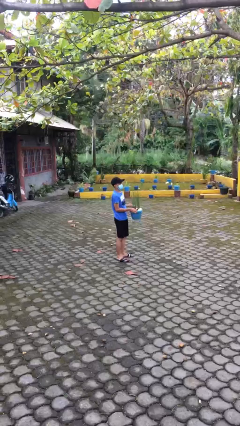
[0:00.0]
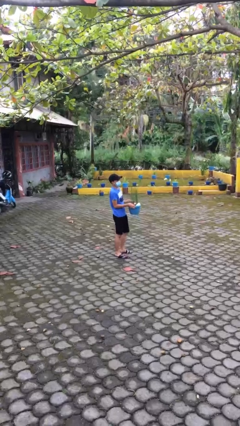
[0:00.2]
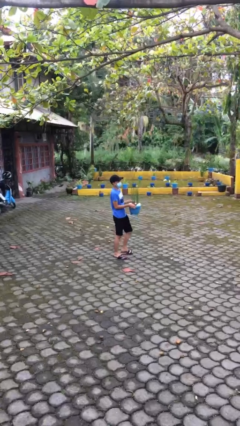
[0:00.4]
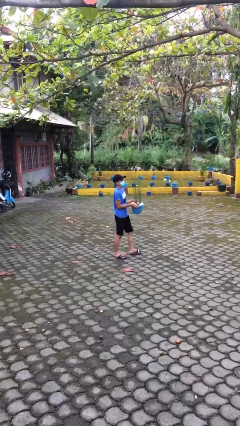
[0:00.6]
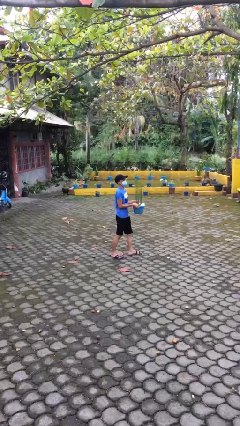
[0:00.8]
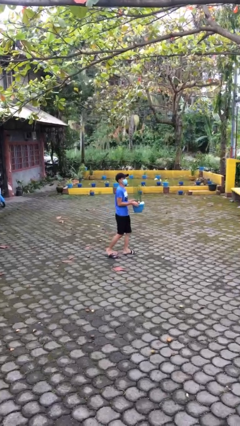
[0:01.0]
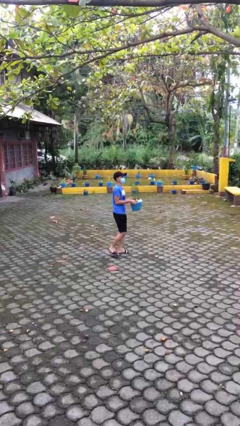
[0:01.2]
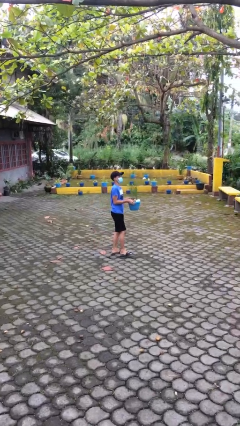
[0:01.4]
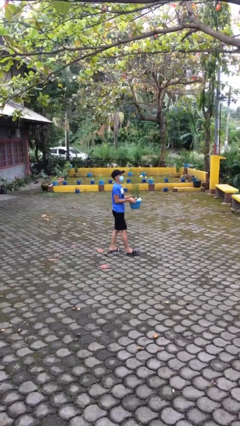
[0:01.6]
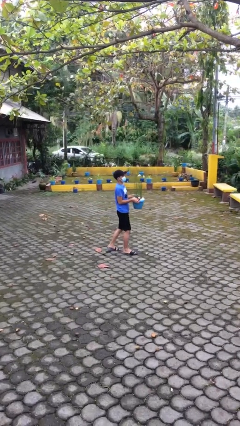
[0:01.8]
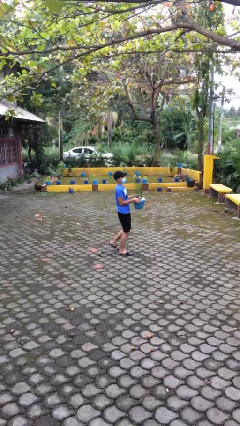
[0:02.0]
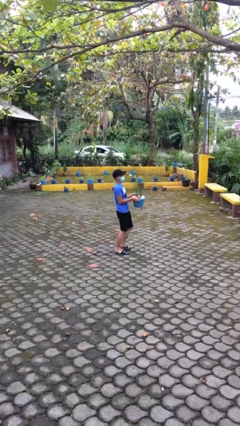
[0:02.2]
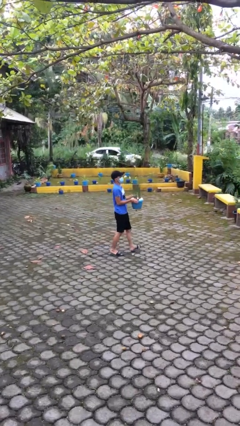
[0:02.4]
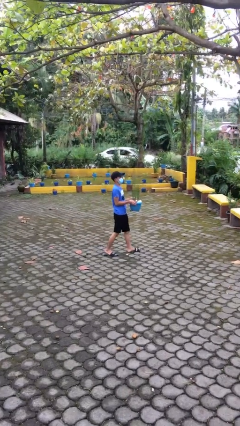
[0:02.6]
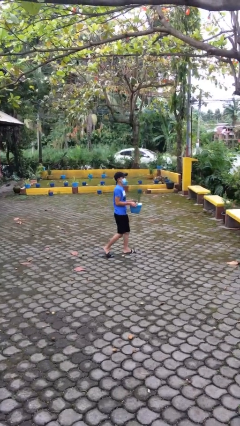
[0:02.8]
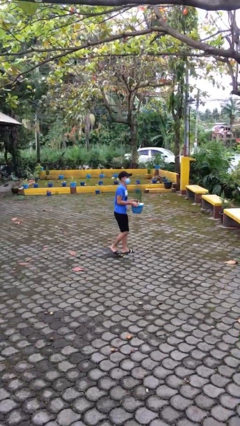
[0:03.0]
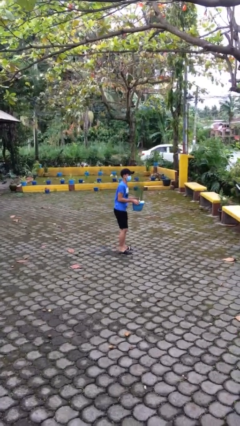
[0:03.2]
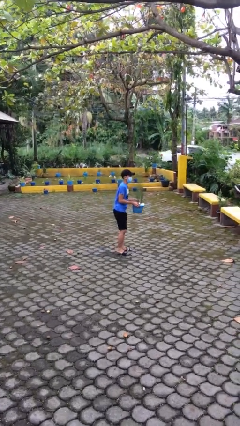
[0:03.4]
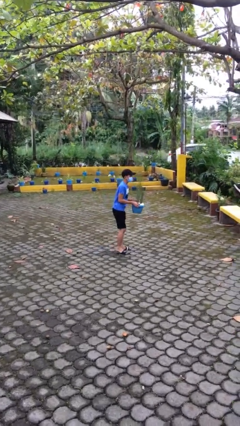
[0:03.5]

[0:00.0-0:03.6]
person carries heavy object

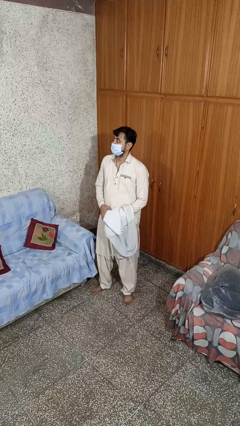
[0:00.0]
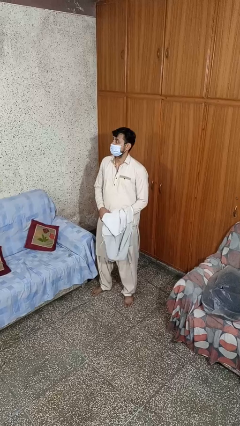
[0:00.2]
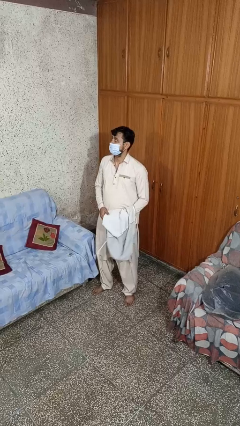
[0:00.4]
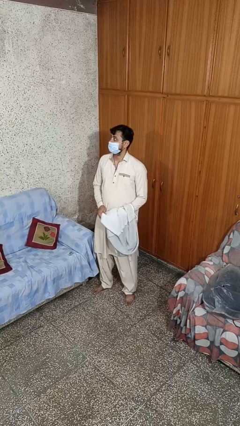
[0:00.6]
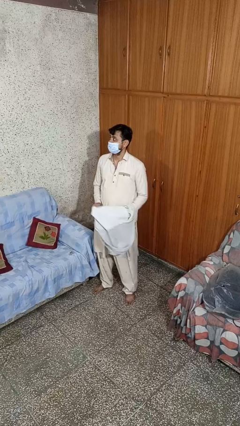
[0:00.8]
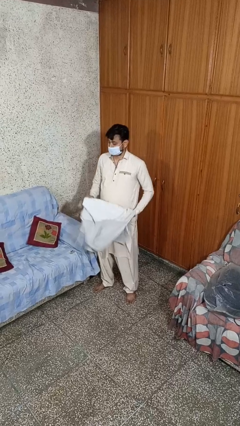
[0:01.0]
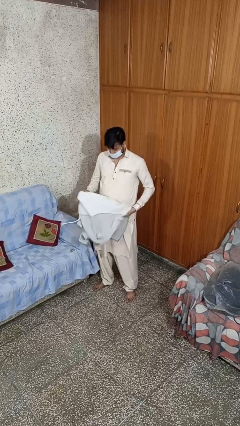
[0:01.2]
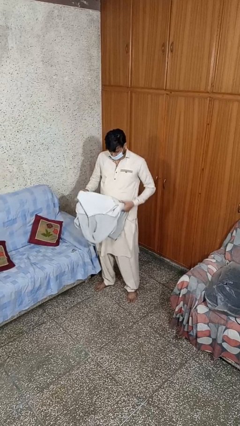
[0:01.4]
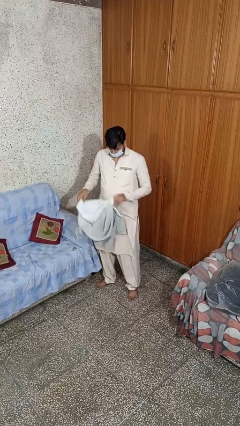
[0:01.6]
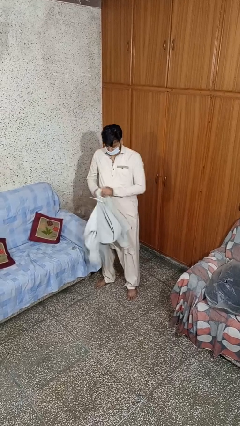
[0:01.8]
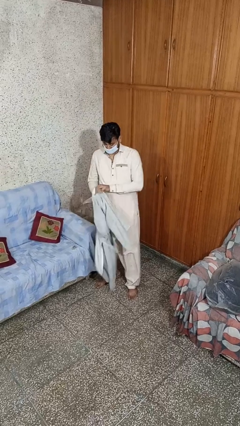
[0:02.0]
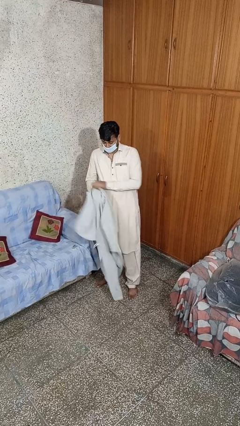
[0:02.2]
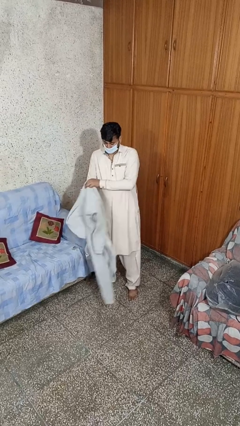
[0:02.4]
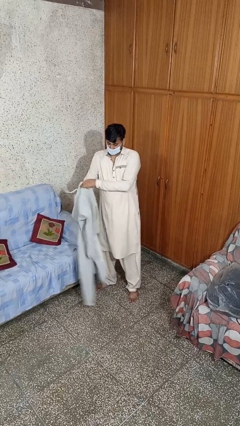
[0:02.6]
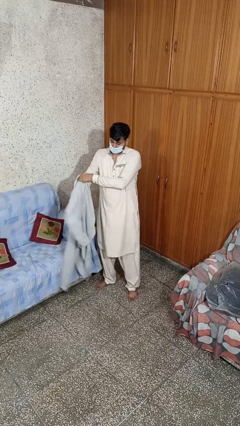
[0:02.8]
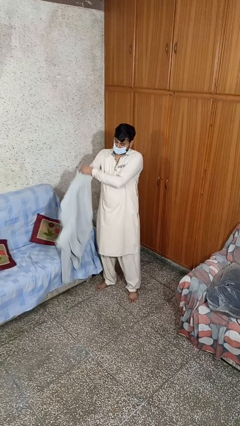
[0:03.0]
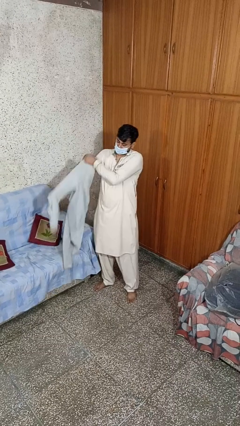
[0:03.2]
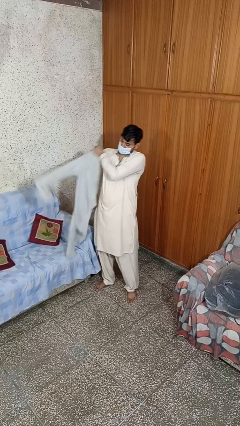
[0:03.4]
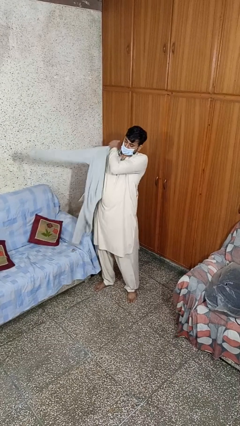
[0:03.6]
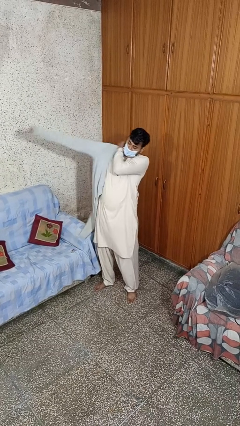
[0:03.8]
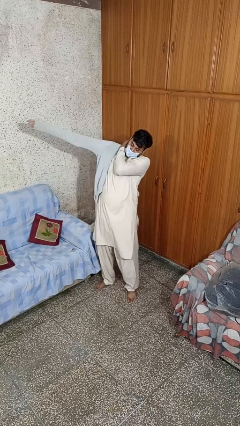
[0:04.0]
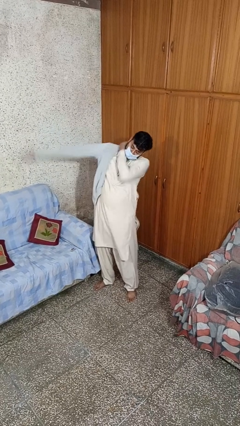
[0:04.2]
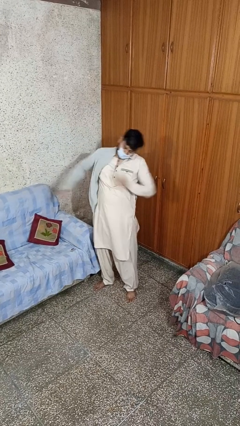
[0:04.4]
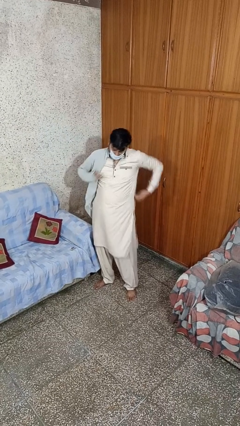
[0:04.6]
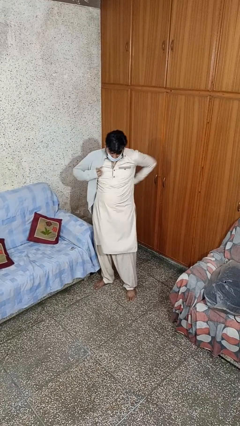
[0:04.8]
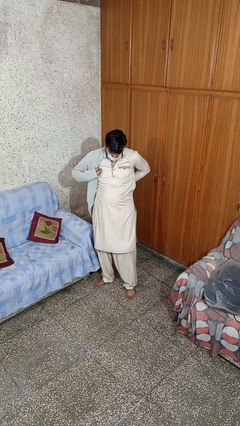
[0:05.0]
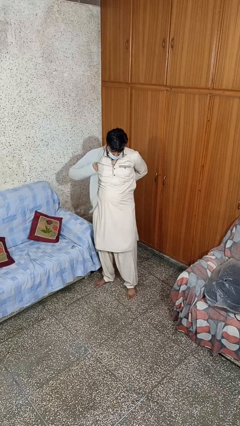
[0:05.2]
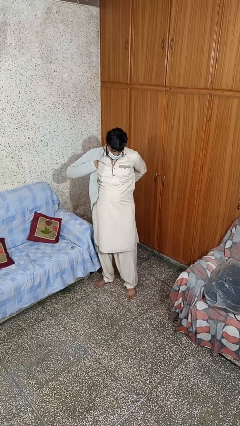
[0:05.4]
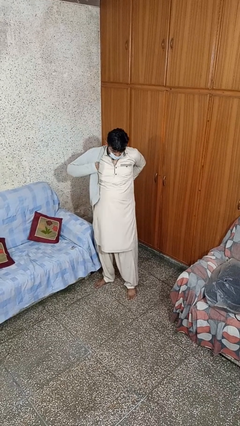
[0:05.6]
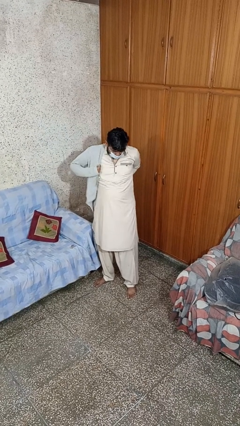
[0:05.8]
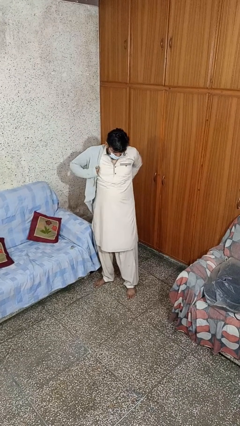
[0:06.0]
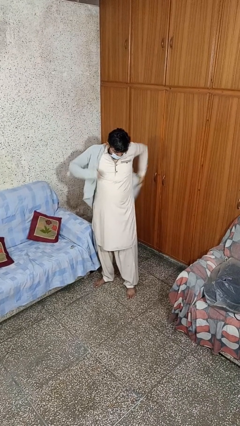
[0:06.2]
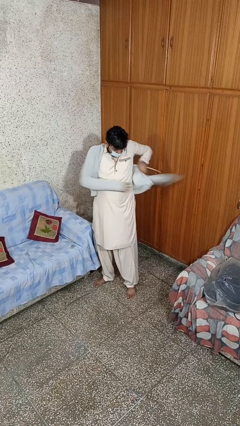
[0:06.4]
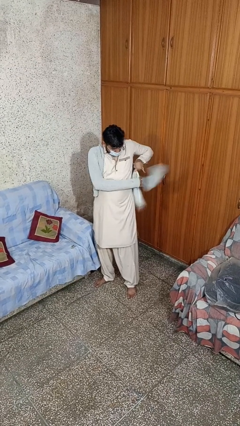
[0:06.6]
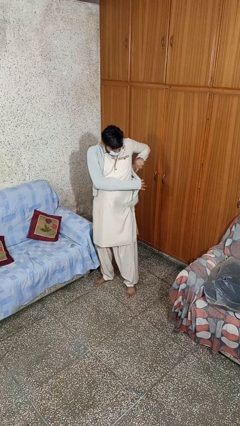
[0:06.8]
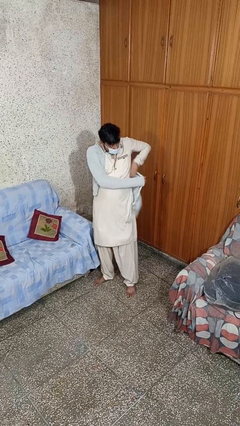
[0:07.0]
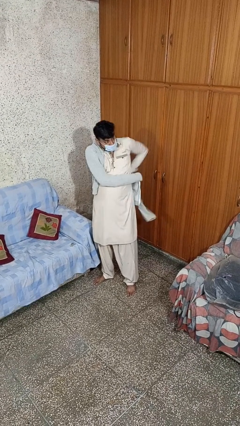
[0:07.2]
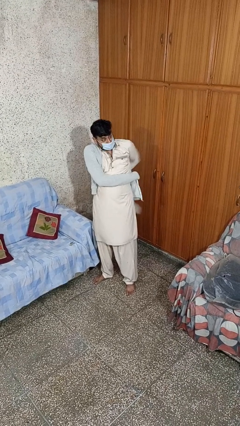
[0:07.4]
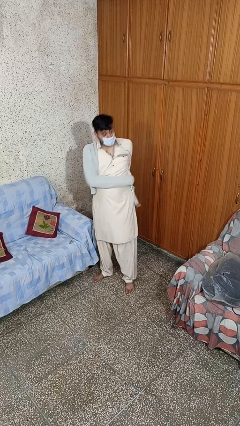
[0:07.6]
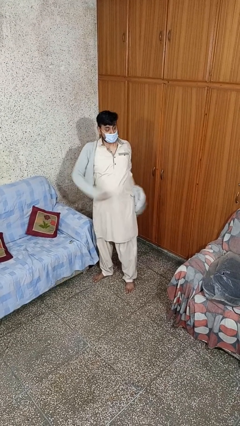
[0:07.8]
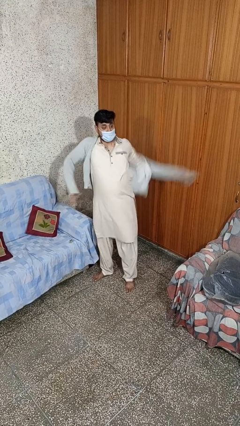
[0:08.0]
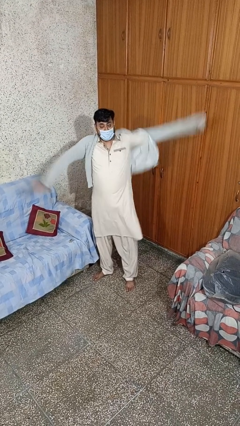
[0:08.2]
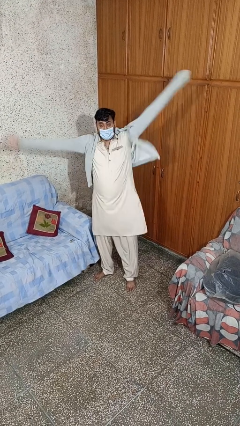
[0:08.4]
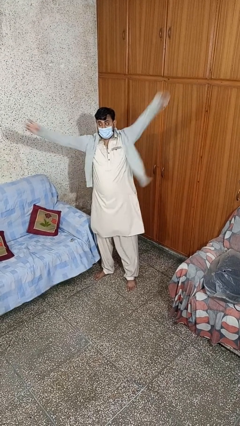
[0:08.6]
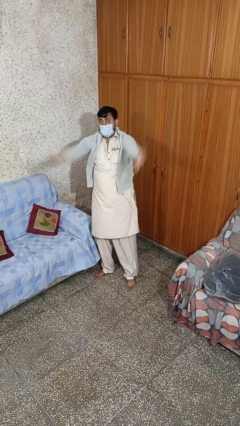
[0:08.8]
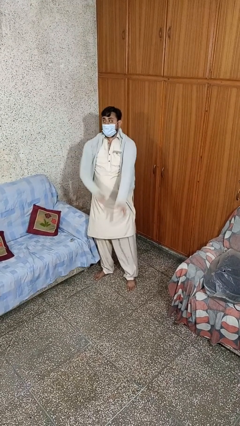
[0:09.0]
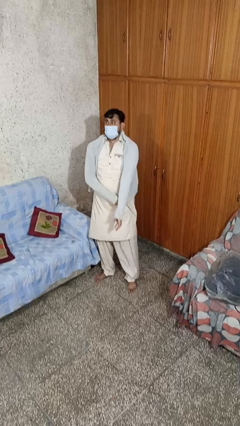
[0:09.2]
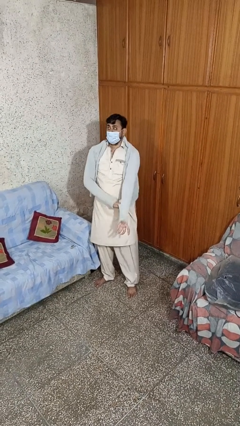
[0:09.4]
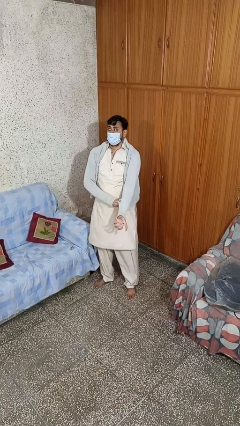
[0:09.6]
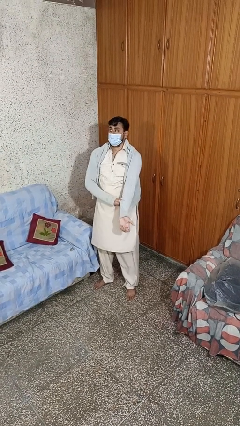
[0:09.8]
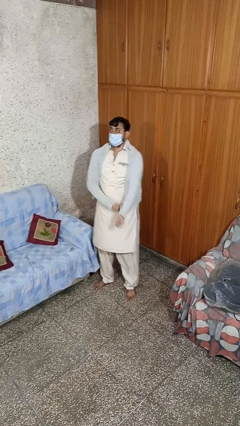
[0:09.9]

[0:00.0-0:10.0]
person puts on jacket

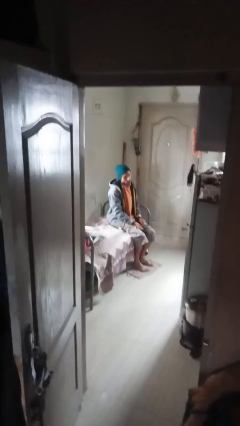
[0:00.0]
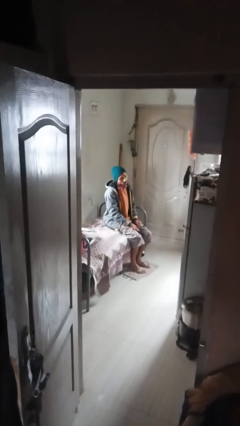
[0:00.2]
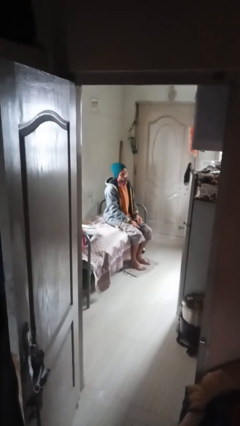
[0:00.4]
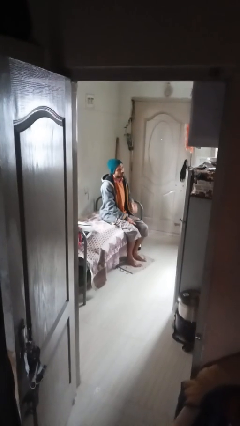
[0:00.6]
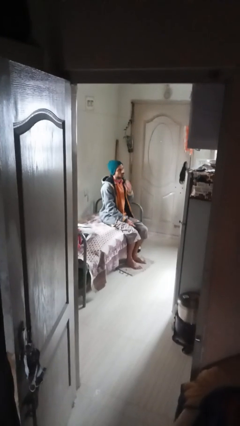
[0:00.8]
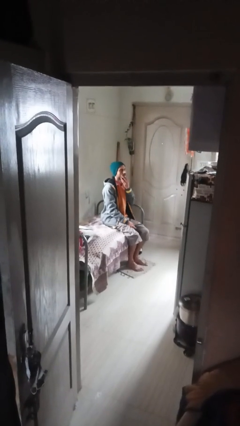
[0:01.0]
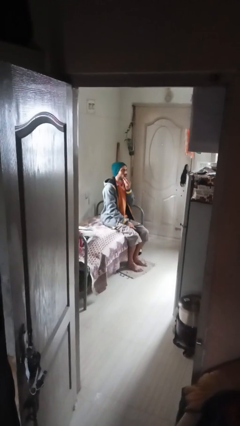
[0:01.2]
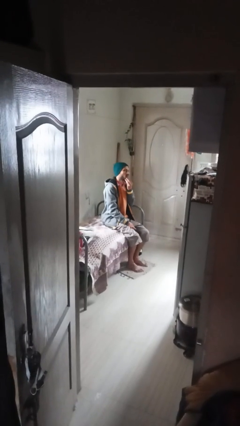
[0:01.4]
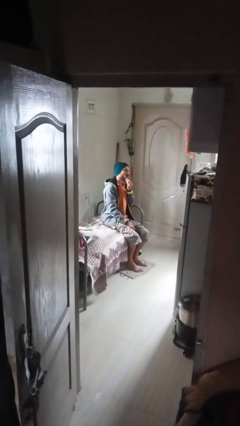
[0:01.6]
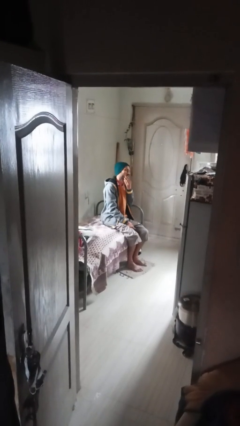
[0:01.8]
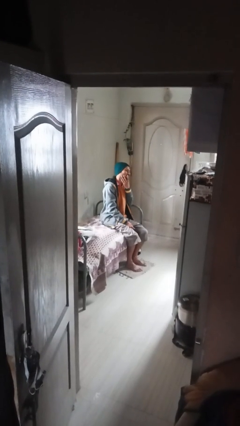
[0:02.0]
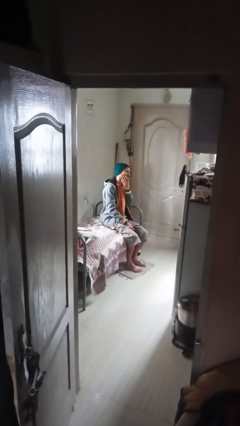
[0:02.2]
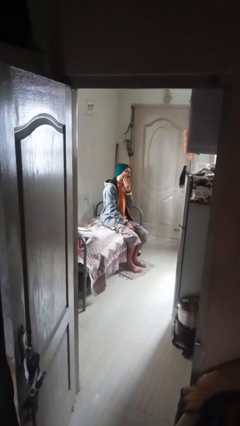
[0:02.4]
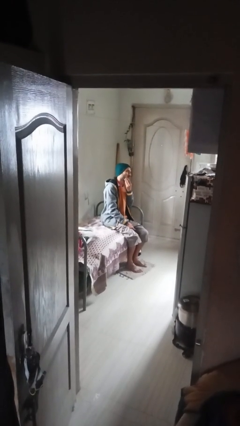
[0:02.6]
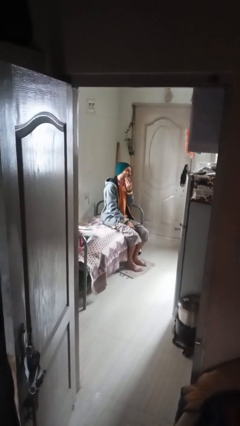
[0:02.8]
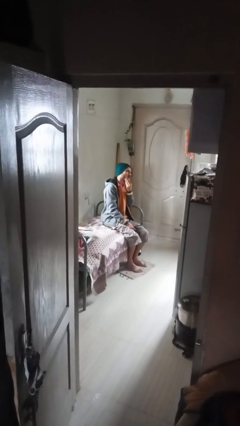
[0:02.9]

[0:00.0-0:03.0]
person strokes chin

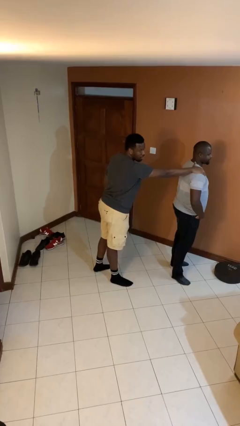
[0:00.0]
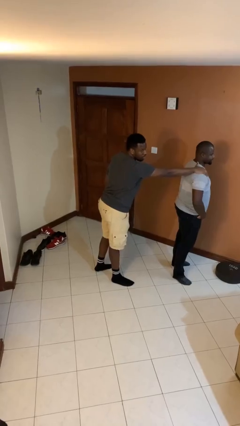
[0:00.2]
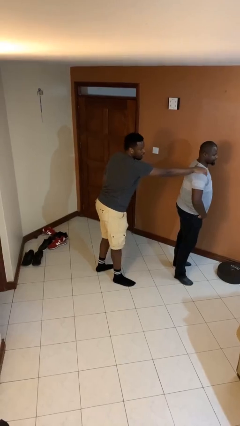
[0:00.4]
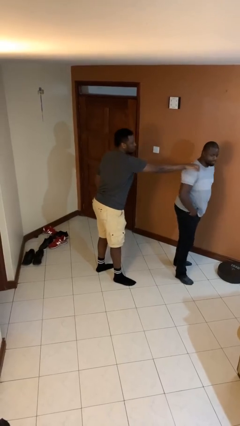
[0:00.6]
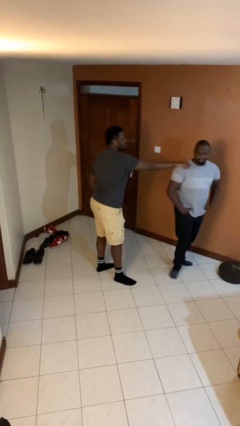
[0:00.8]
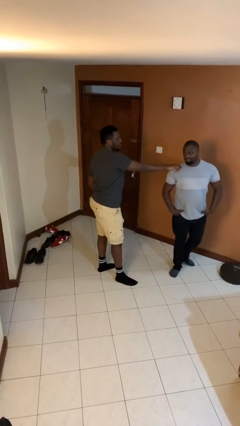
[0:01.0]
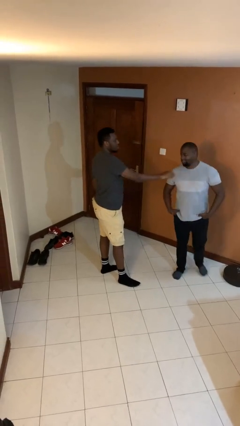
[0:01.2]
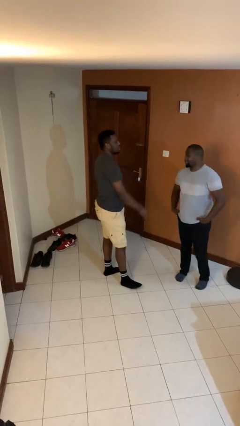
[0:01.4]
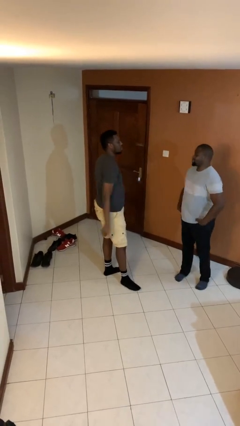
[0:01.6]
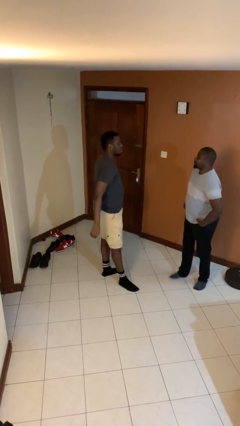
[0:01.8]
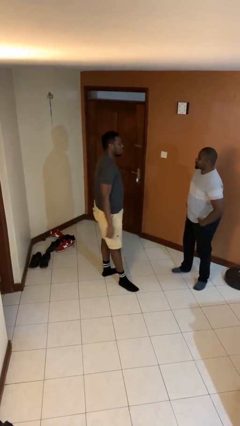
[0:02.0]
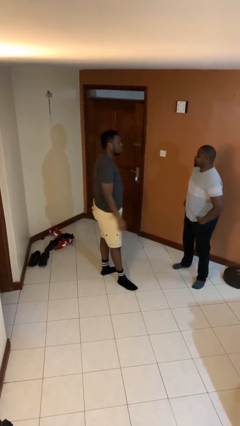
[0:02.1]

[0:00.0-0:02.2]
person spins person around
